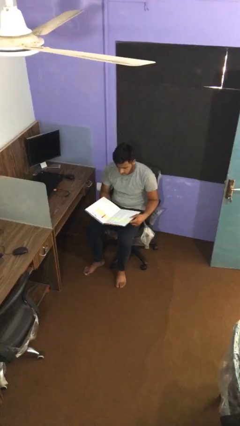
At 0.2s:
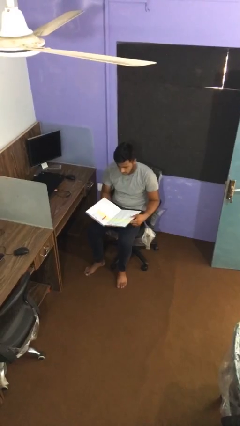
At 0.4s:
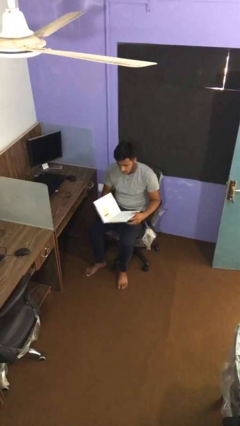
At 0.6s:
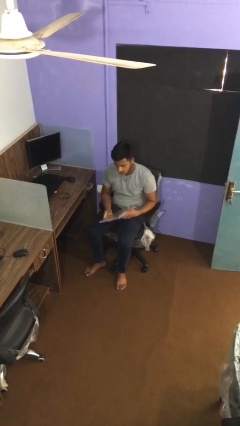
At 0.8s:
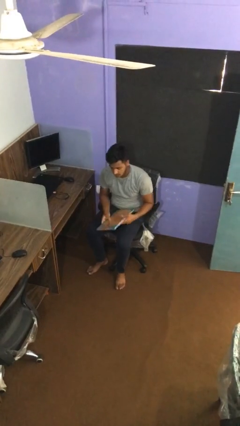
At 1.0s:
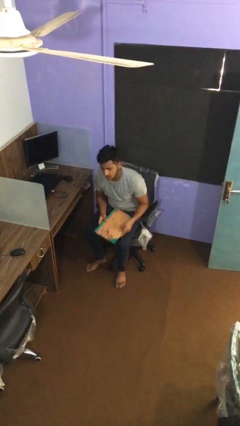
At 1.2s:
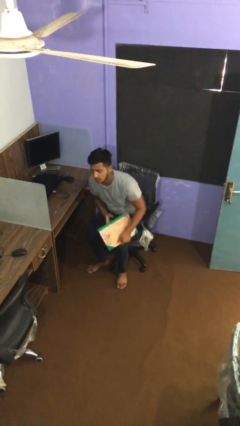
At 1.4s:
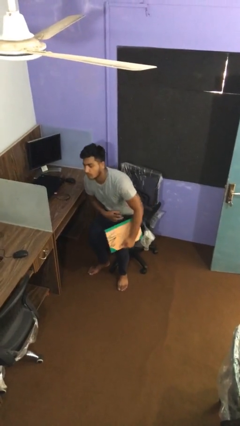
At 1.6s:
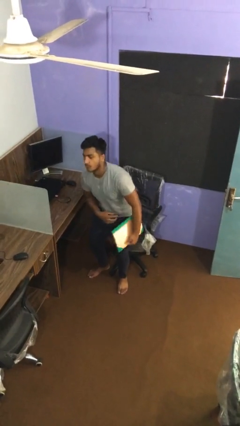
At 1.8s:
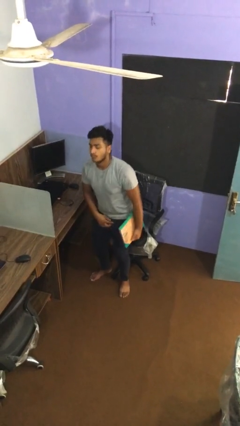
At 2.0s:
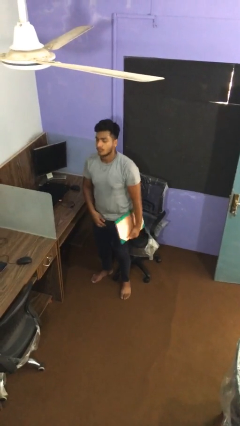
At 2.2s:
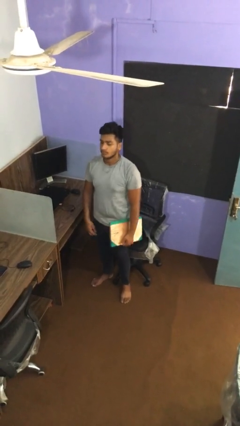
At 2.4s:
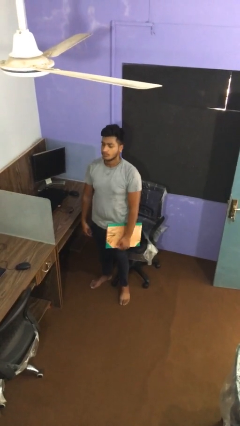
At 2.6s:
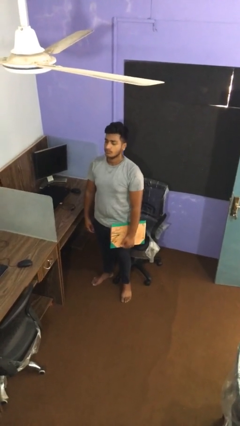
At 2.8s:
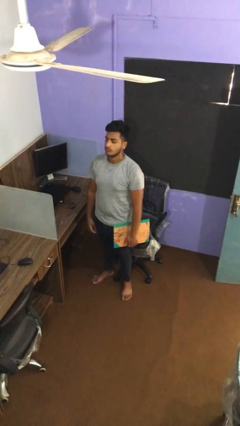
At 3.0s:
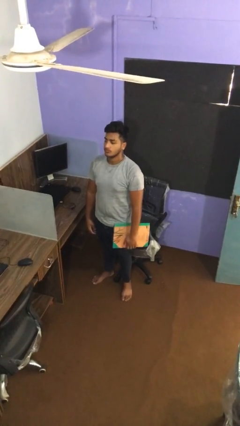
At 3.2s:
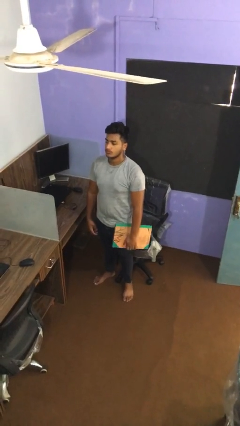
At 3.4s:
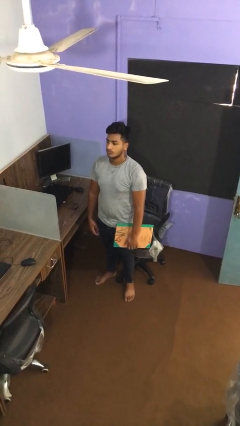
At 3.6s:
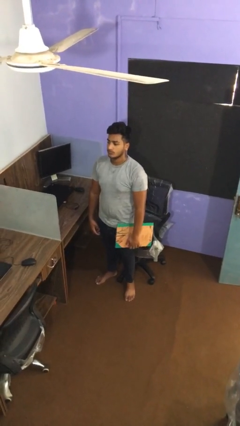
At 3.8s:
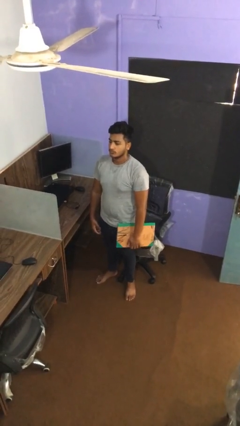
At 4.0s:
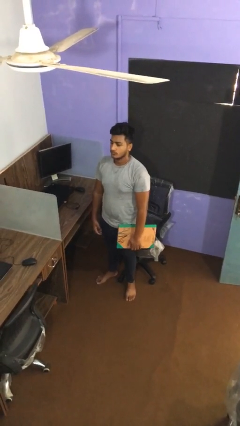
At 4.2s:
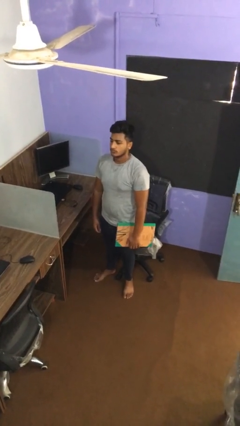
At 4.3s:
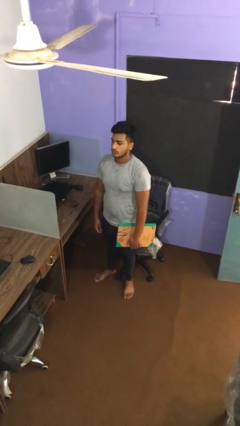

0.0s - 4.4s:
person stands up

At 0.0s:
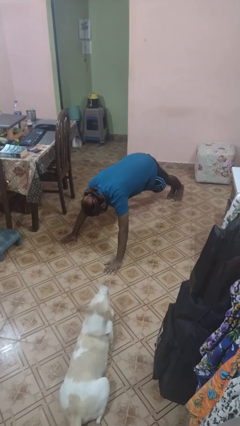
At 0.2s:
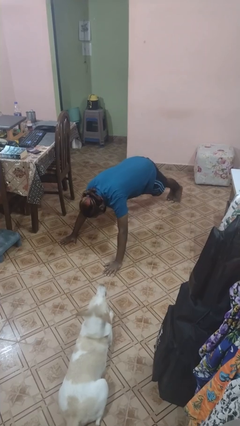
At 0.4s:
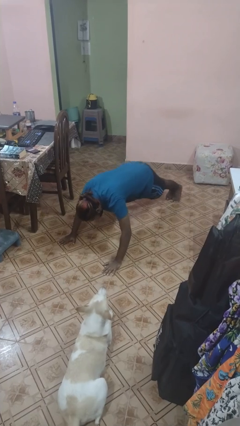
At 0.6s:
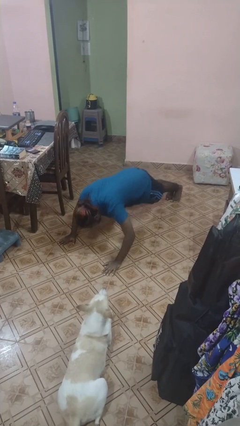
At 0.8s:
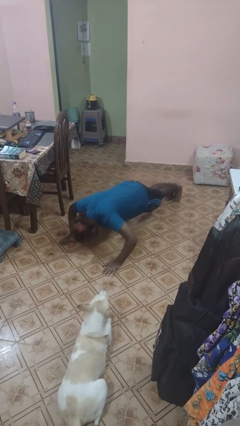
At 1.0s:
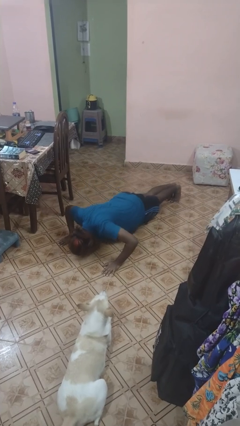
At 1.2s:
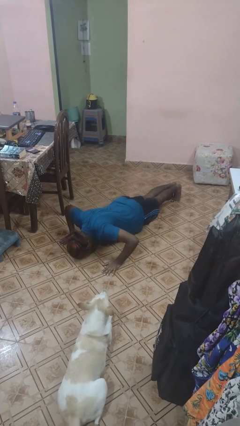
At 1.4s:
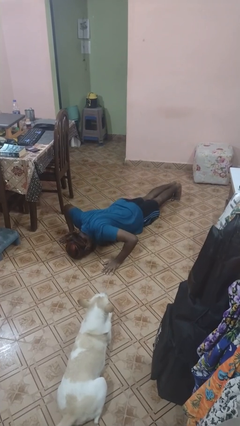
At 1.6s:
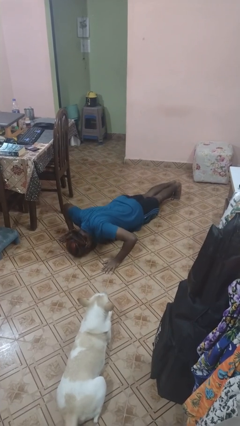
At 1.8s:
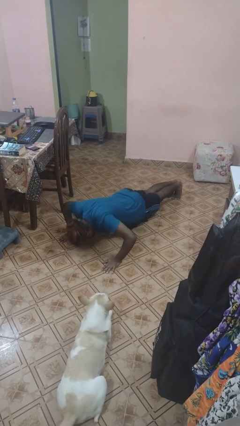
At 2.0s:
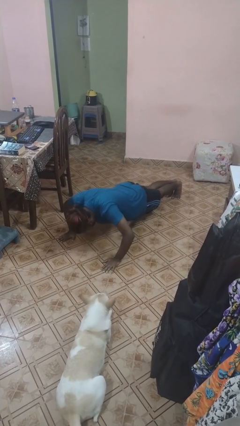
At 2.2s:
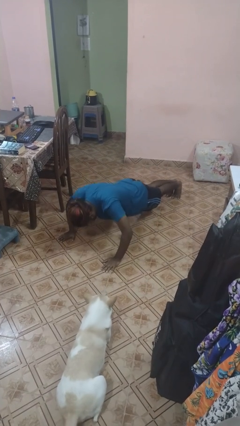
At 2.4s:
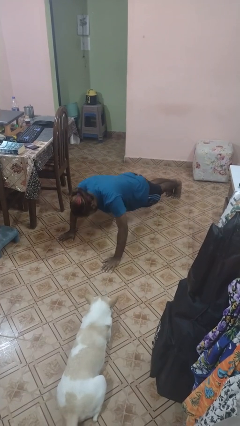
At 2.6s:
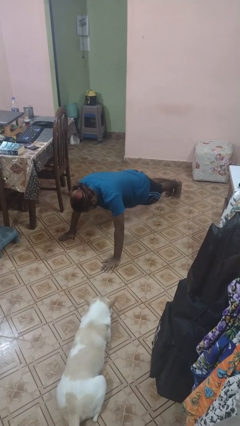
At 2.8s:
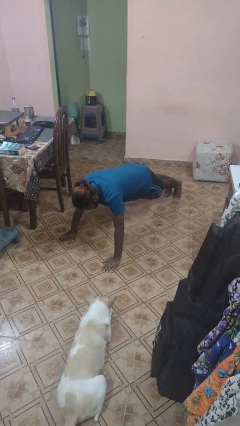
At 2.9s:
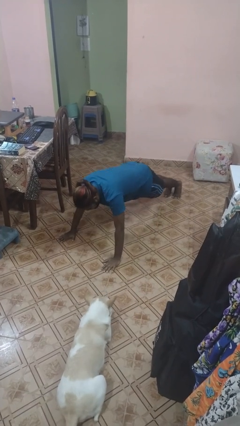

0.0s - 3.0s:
person exercises with pushup

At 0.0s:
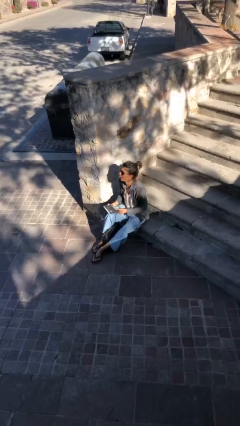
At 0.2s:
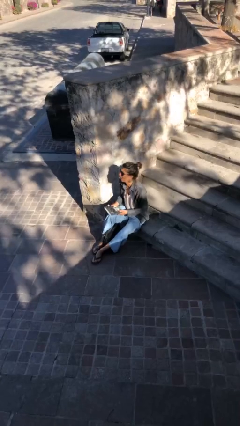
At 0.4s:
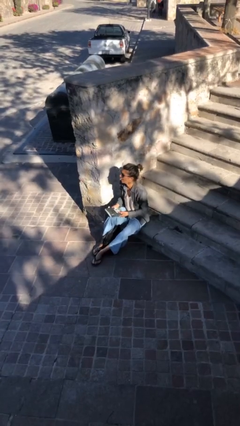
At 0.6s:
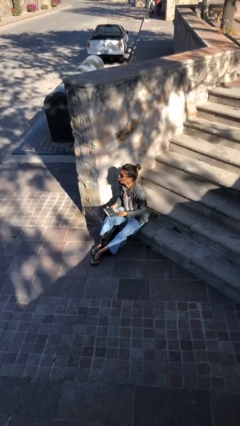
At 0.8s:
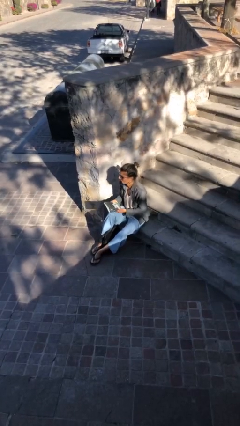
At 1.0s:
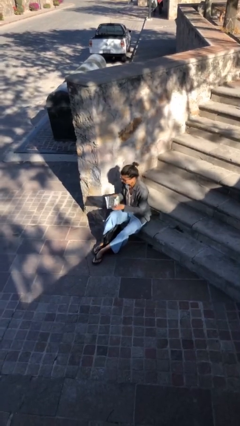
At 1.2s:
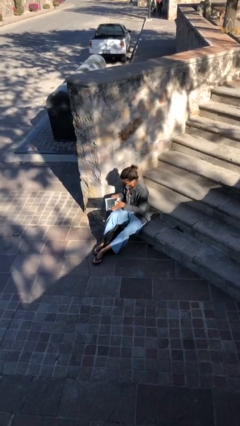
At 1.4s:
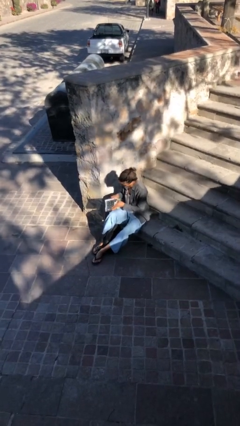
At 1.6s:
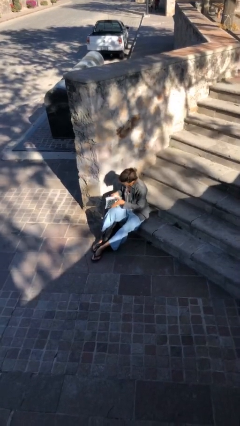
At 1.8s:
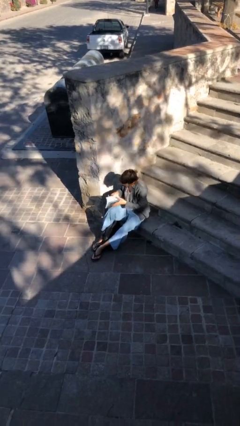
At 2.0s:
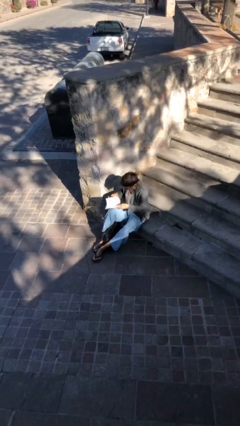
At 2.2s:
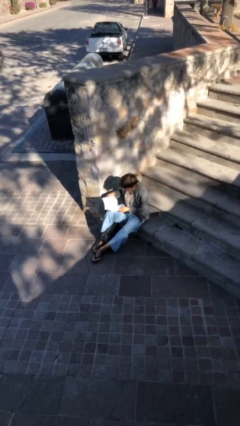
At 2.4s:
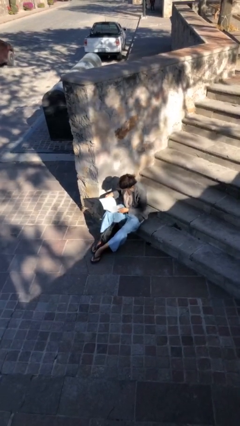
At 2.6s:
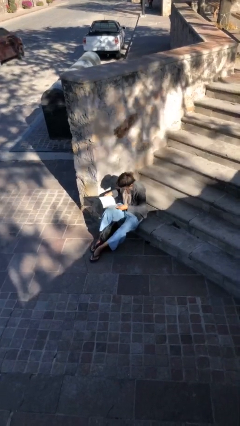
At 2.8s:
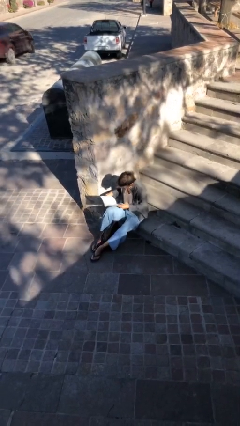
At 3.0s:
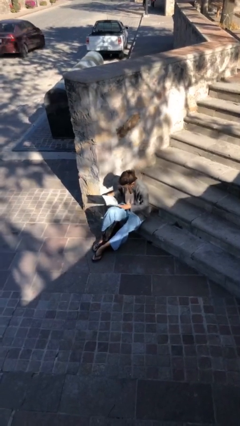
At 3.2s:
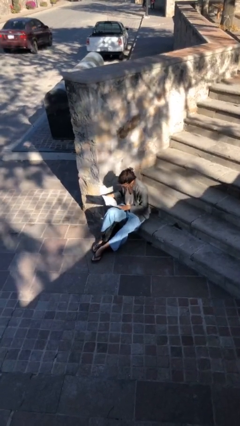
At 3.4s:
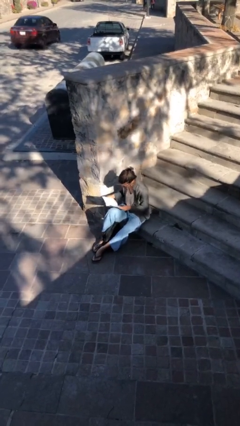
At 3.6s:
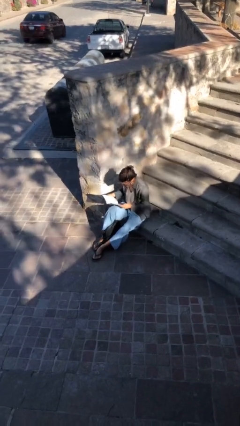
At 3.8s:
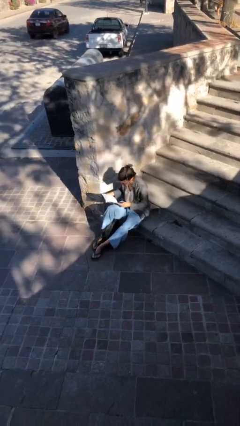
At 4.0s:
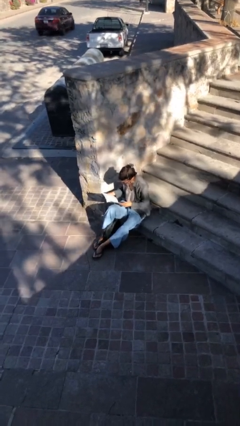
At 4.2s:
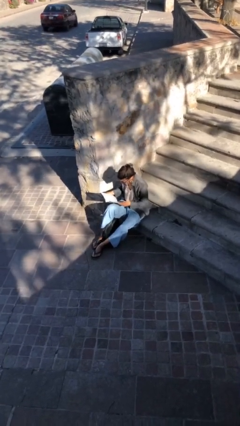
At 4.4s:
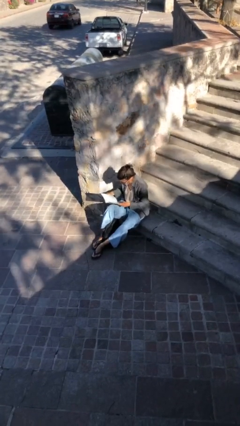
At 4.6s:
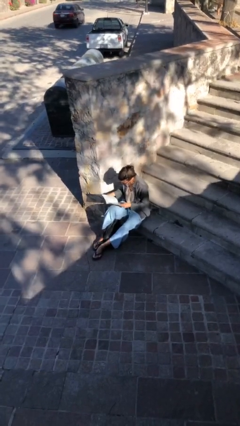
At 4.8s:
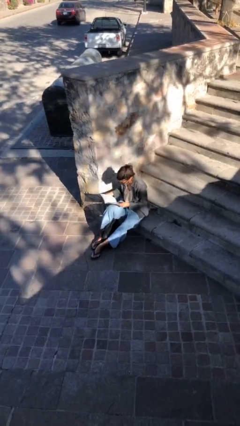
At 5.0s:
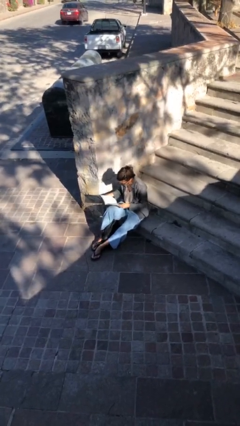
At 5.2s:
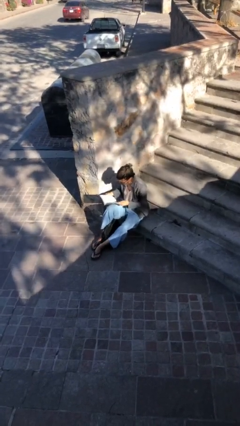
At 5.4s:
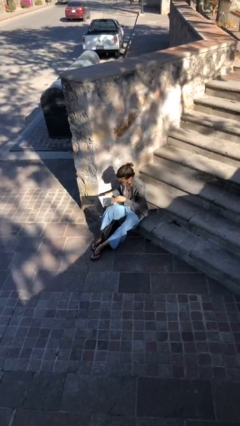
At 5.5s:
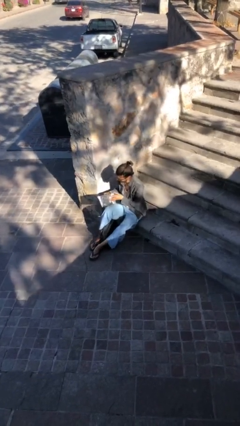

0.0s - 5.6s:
person reads document

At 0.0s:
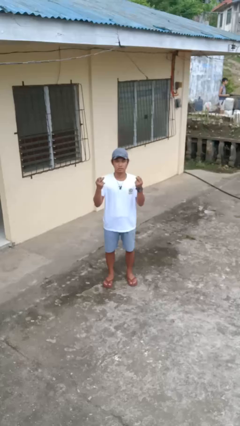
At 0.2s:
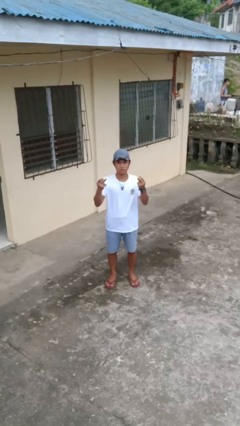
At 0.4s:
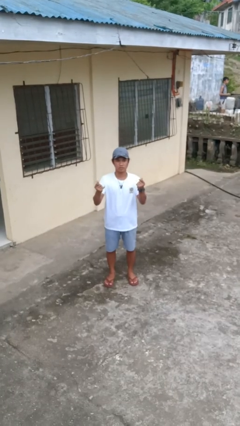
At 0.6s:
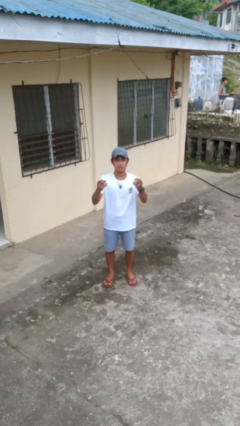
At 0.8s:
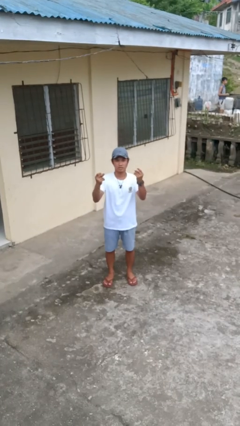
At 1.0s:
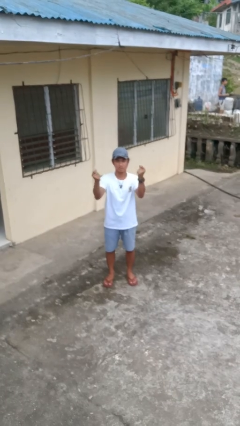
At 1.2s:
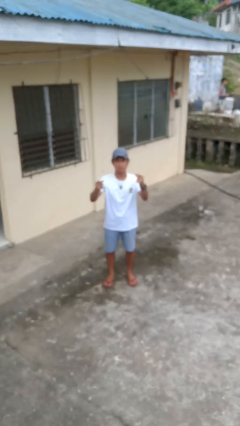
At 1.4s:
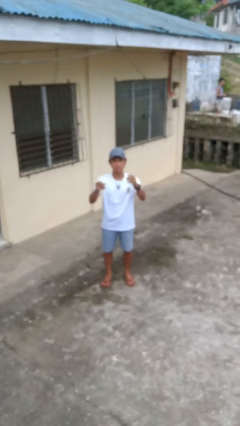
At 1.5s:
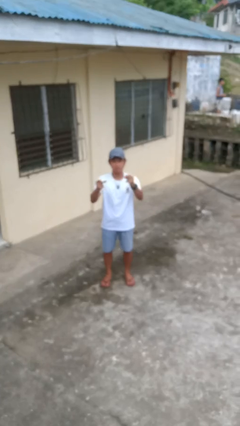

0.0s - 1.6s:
person snaps fingers

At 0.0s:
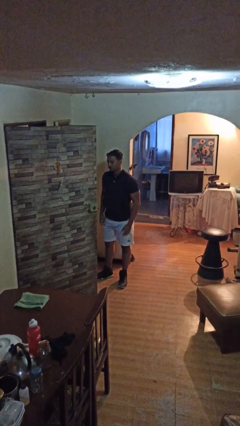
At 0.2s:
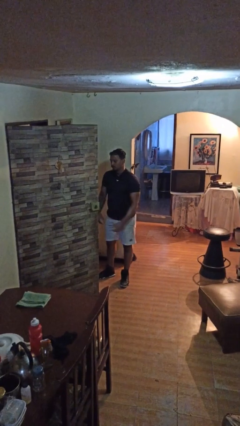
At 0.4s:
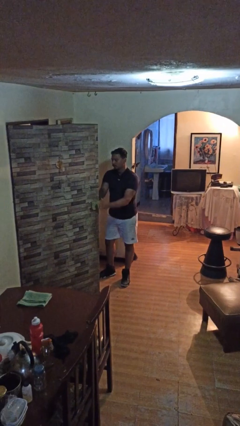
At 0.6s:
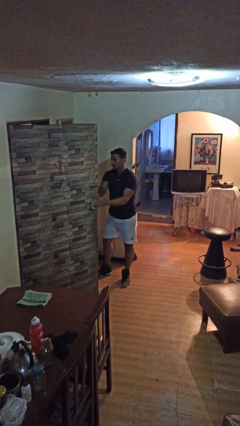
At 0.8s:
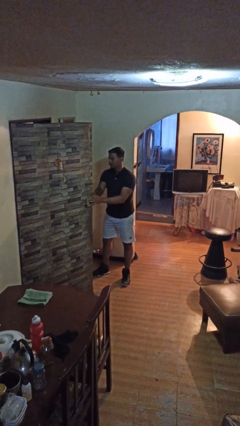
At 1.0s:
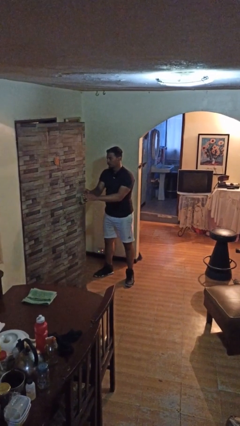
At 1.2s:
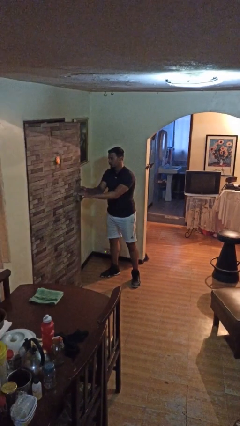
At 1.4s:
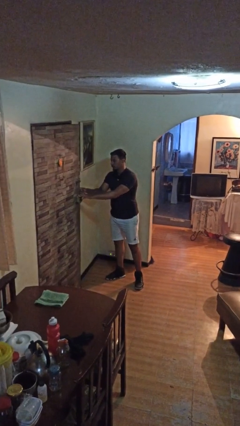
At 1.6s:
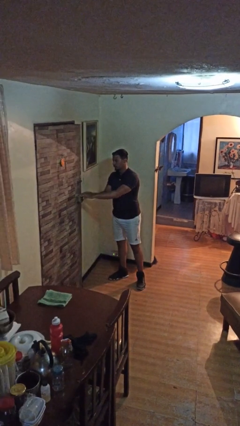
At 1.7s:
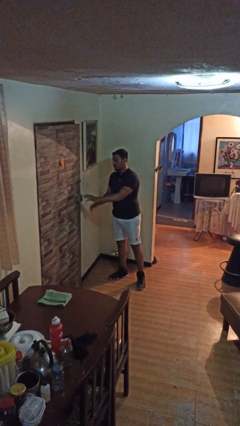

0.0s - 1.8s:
person closes facility door

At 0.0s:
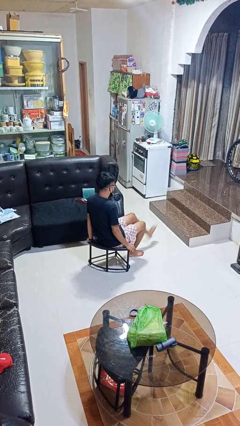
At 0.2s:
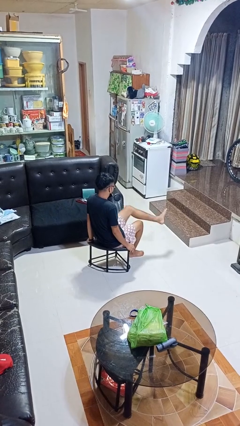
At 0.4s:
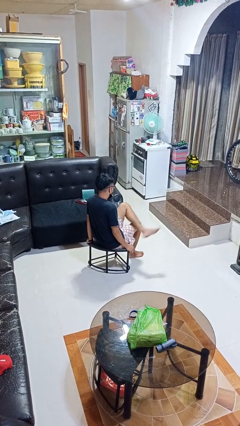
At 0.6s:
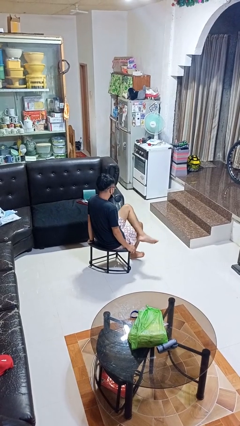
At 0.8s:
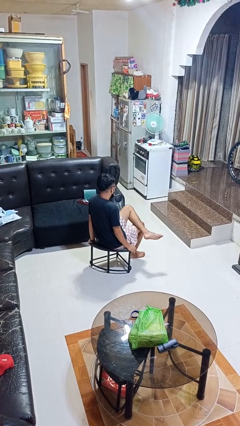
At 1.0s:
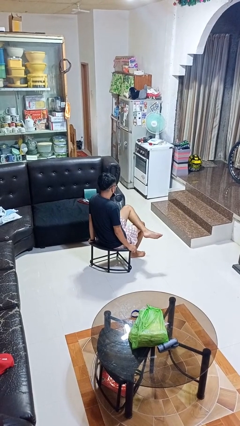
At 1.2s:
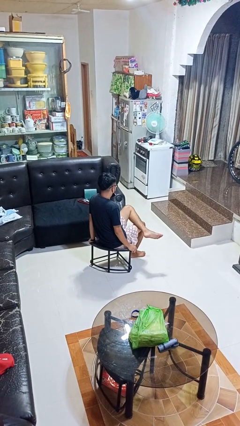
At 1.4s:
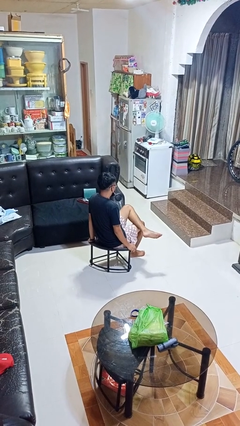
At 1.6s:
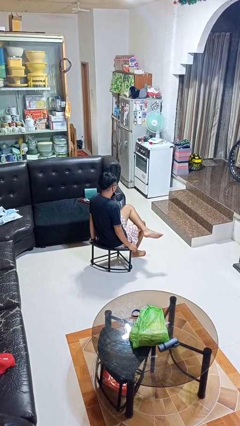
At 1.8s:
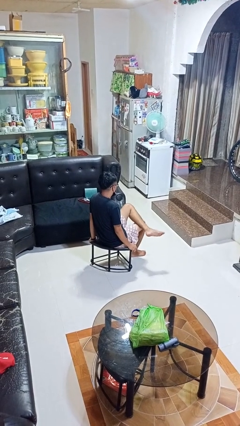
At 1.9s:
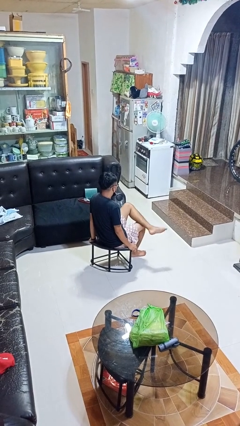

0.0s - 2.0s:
person crosses legs
